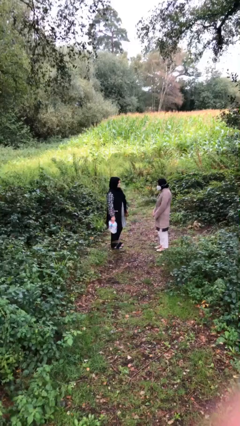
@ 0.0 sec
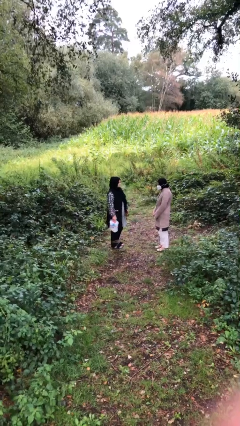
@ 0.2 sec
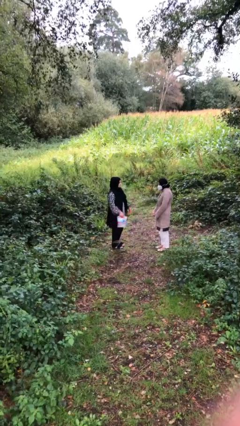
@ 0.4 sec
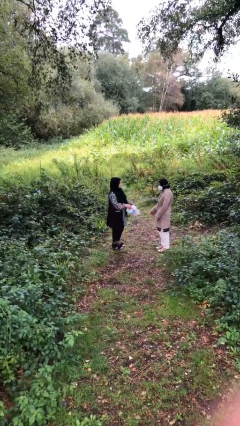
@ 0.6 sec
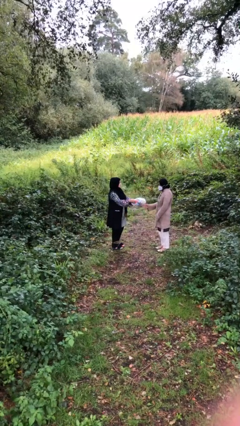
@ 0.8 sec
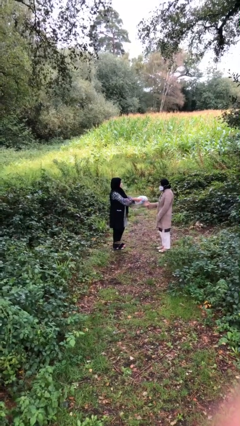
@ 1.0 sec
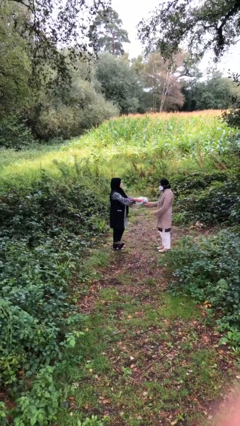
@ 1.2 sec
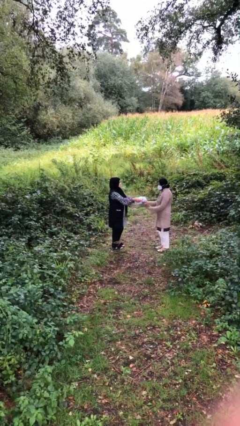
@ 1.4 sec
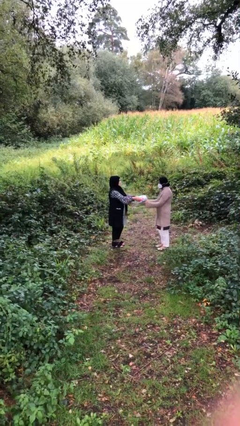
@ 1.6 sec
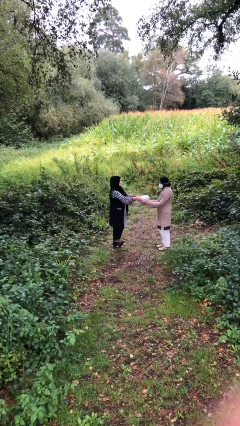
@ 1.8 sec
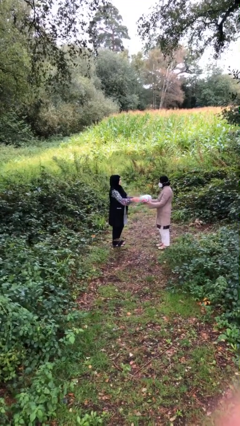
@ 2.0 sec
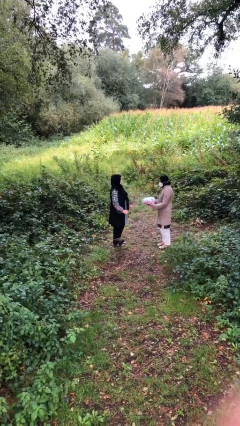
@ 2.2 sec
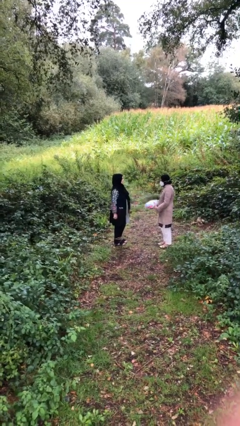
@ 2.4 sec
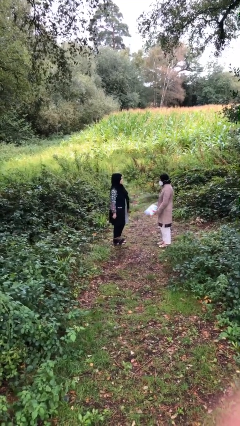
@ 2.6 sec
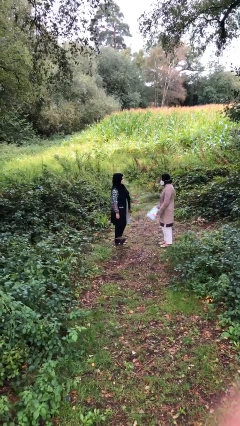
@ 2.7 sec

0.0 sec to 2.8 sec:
person transfers object to person

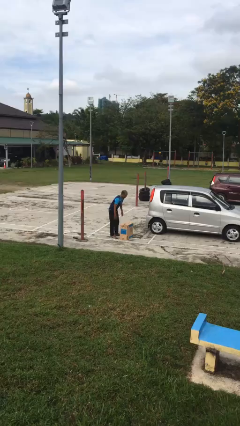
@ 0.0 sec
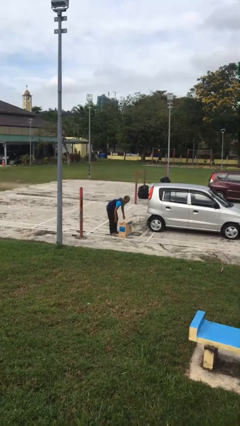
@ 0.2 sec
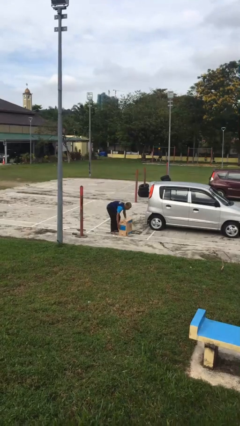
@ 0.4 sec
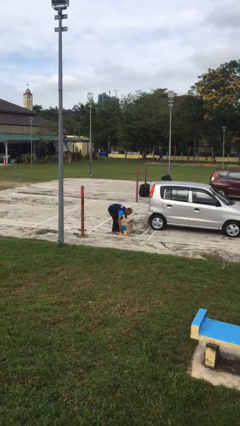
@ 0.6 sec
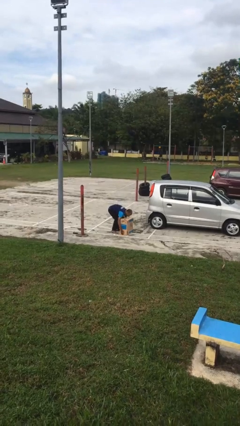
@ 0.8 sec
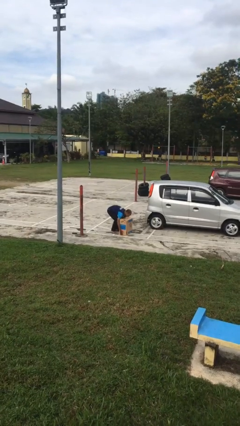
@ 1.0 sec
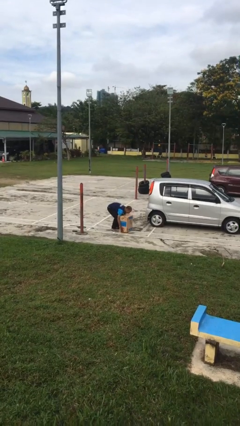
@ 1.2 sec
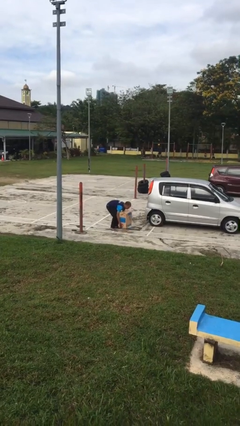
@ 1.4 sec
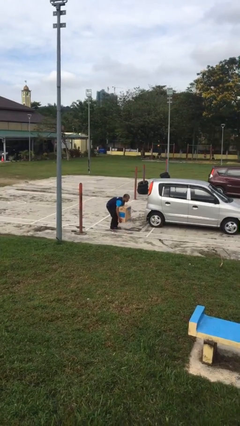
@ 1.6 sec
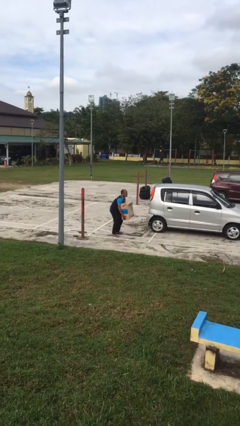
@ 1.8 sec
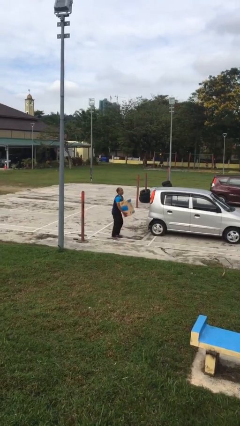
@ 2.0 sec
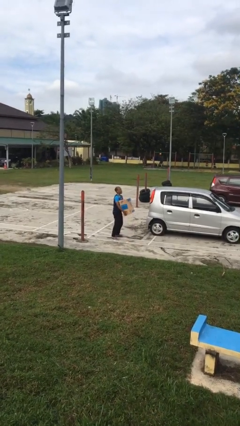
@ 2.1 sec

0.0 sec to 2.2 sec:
person picks up object from floor

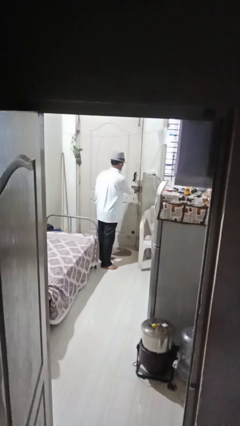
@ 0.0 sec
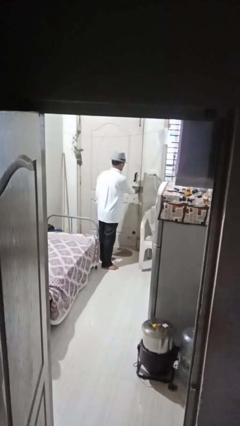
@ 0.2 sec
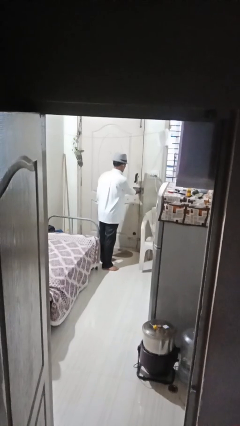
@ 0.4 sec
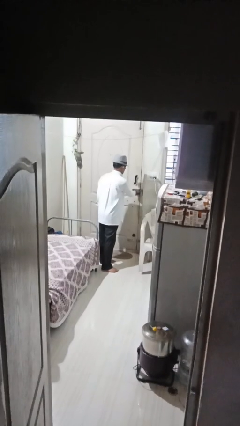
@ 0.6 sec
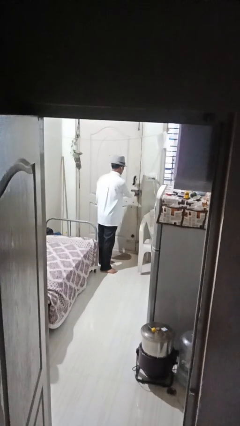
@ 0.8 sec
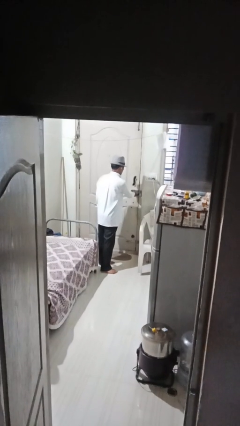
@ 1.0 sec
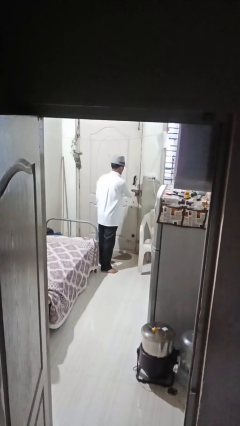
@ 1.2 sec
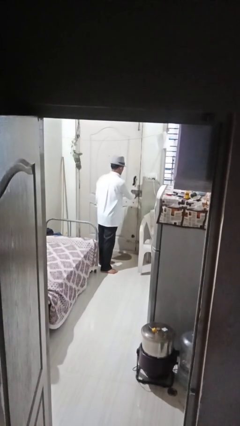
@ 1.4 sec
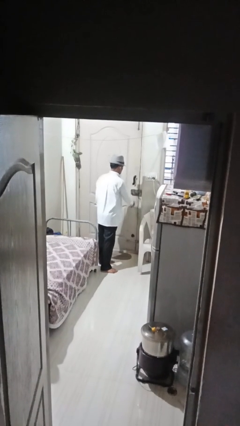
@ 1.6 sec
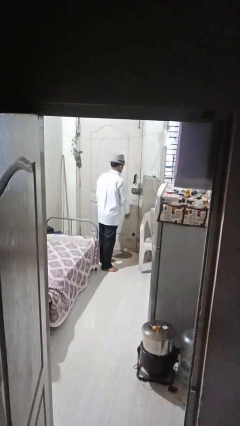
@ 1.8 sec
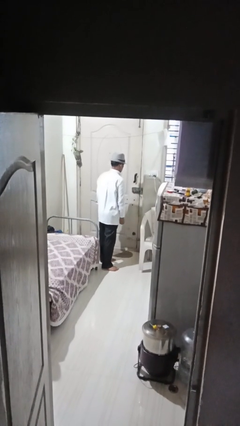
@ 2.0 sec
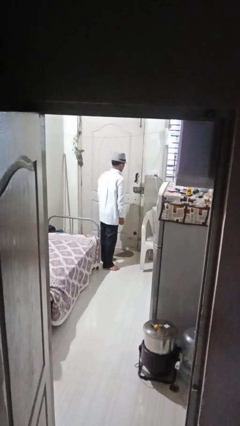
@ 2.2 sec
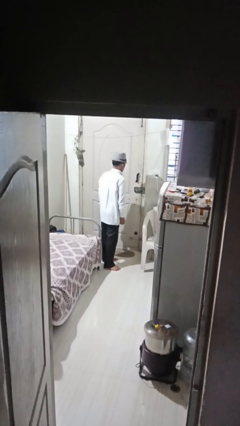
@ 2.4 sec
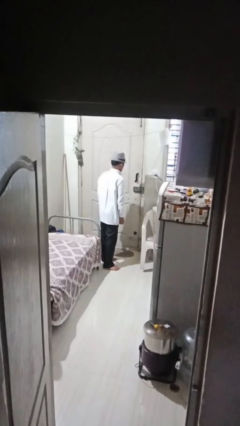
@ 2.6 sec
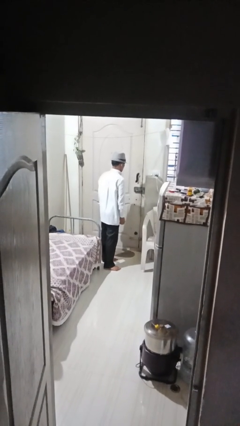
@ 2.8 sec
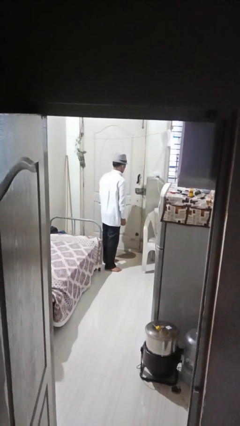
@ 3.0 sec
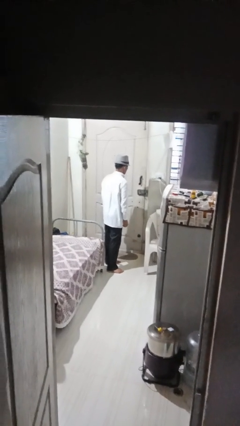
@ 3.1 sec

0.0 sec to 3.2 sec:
person locks door with keys

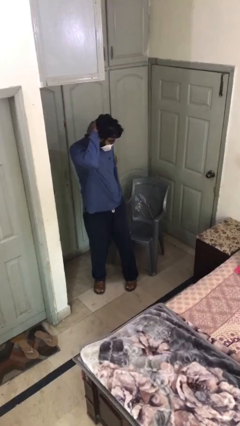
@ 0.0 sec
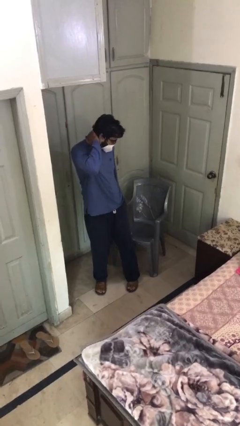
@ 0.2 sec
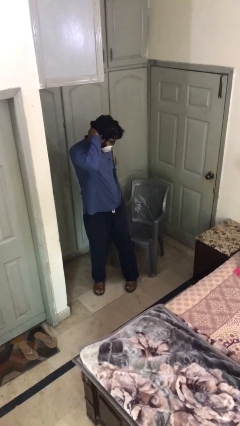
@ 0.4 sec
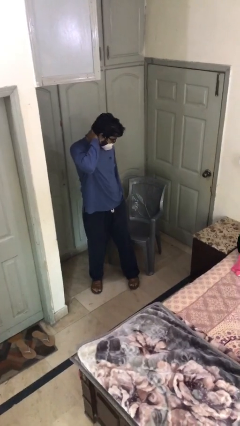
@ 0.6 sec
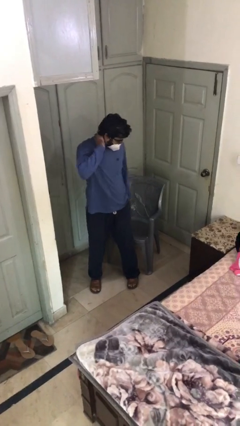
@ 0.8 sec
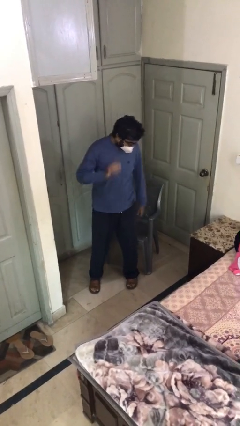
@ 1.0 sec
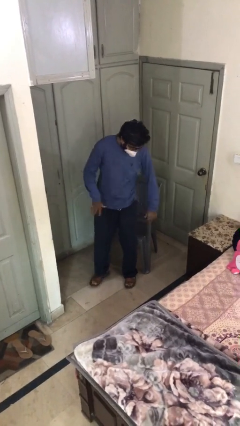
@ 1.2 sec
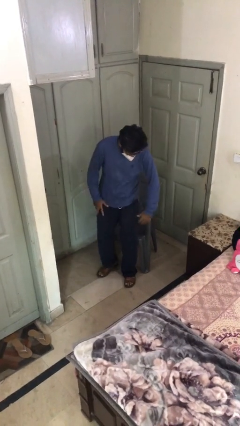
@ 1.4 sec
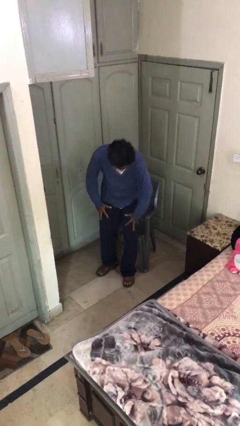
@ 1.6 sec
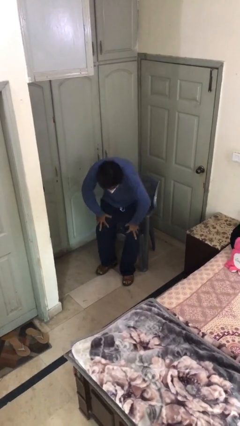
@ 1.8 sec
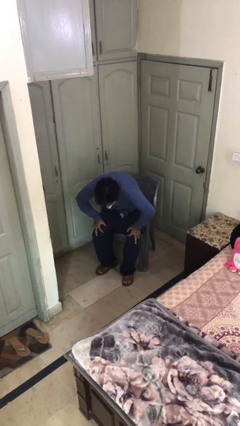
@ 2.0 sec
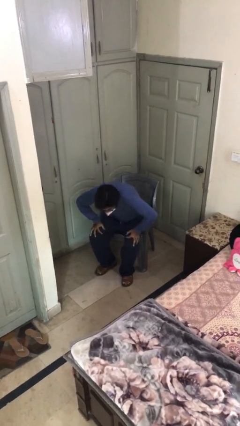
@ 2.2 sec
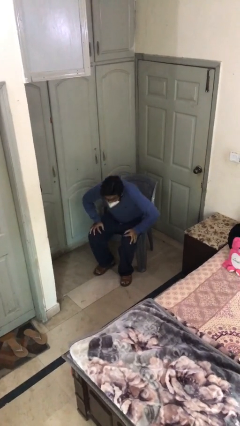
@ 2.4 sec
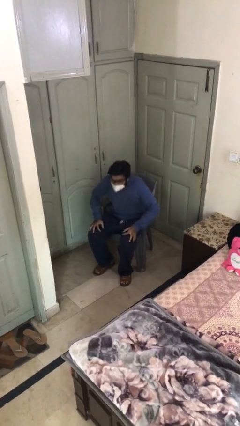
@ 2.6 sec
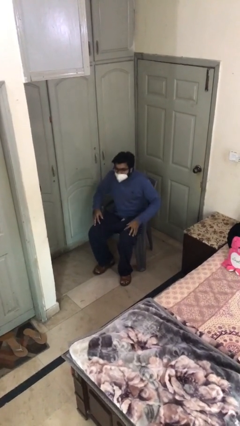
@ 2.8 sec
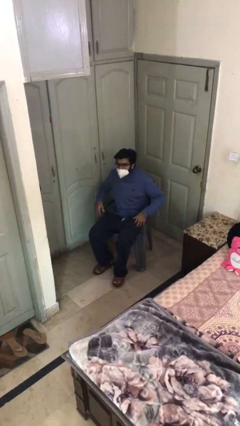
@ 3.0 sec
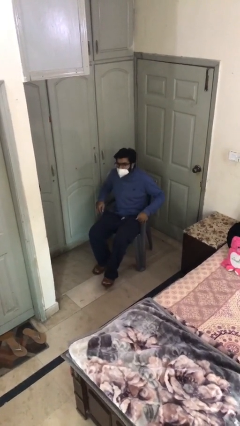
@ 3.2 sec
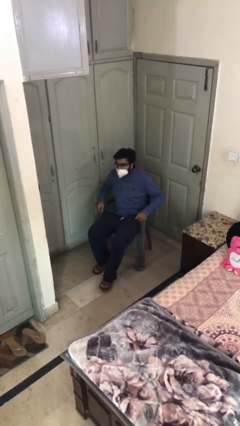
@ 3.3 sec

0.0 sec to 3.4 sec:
person sits down

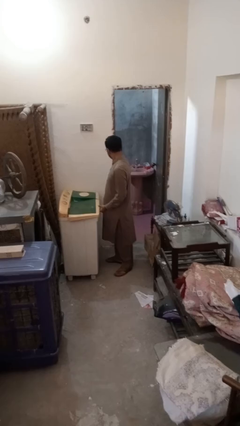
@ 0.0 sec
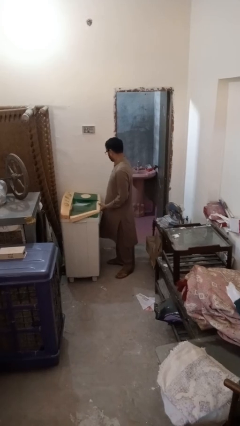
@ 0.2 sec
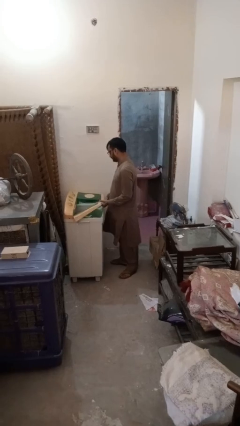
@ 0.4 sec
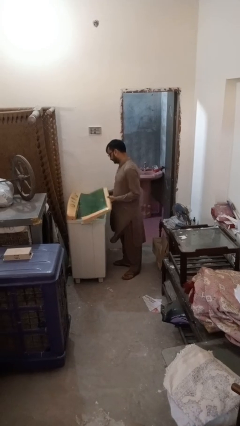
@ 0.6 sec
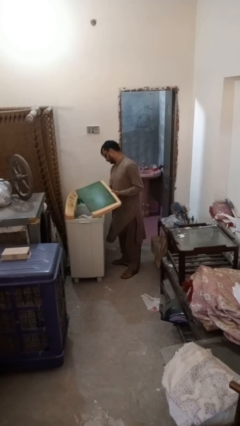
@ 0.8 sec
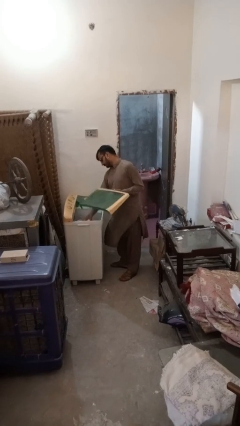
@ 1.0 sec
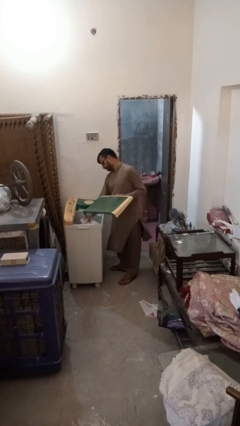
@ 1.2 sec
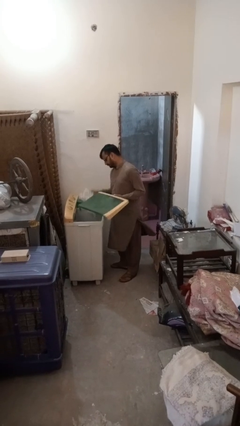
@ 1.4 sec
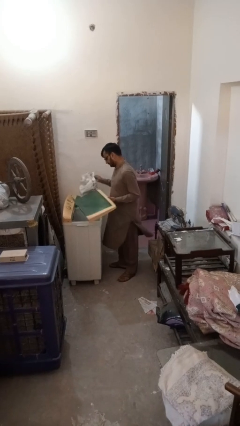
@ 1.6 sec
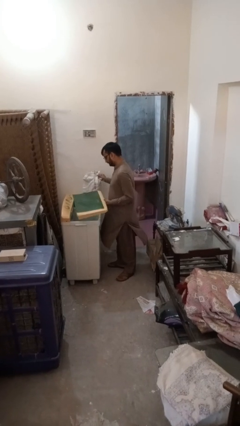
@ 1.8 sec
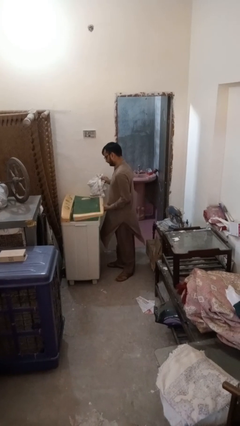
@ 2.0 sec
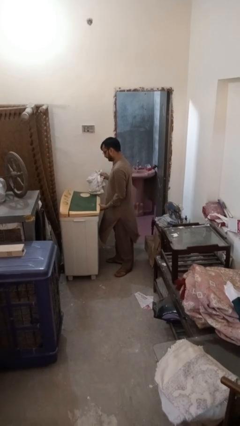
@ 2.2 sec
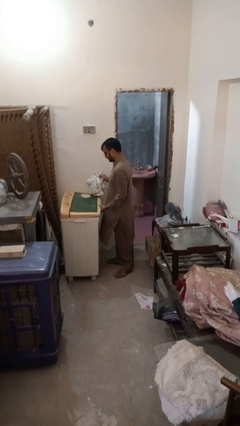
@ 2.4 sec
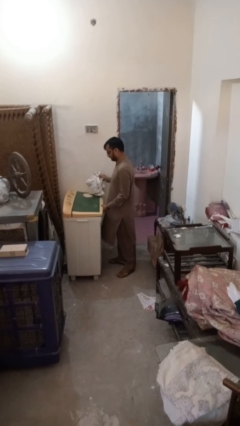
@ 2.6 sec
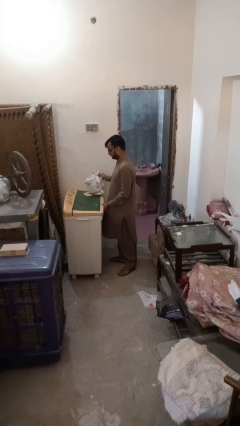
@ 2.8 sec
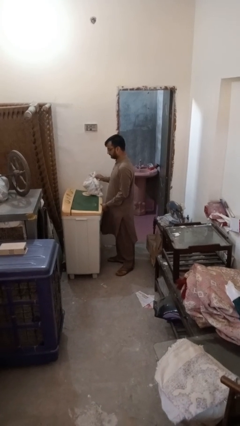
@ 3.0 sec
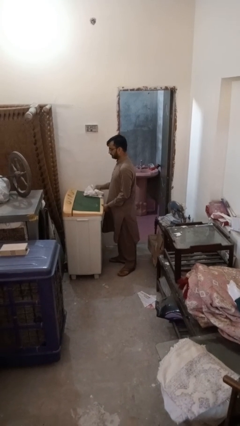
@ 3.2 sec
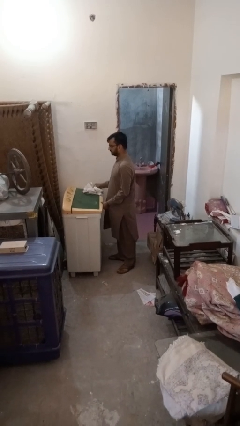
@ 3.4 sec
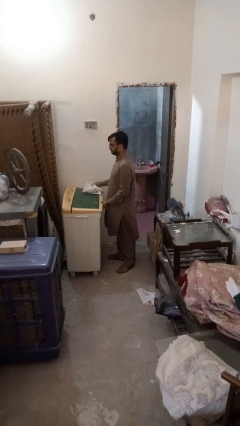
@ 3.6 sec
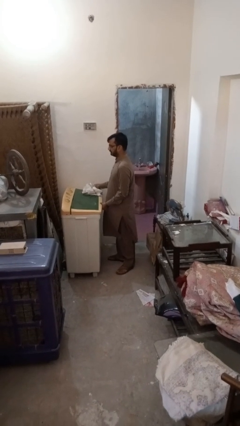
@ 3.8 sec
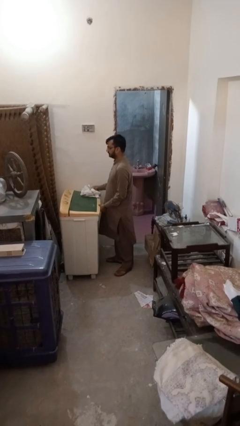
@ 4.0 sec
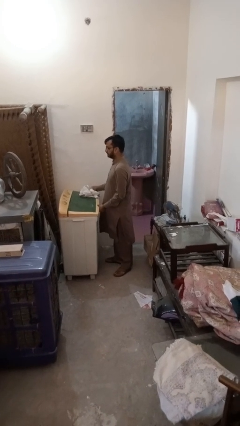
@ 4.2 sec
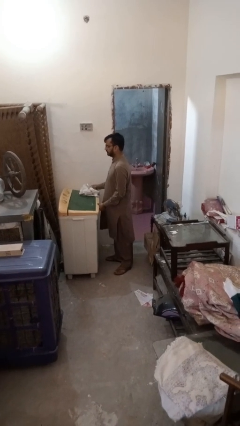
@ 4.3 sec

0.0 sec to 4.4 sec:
person unloads clotheswasher

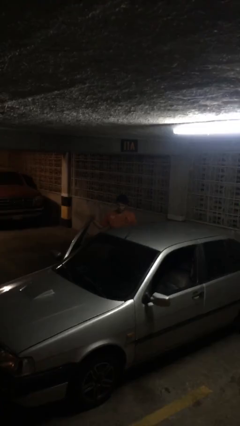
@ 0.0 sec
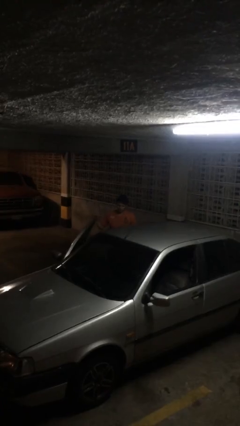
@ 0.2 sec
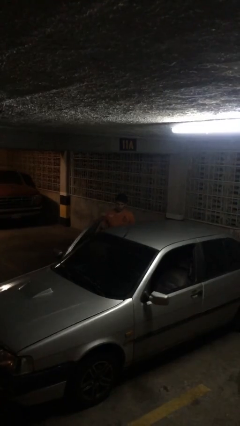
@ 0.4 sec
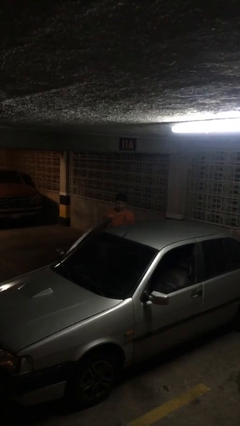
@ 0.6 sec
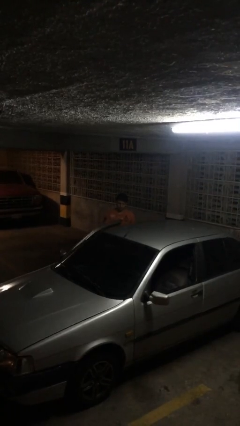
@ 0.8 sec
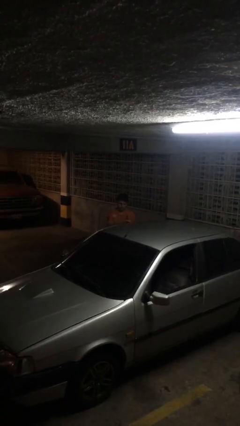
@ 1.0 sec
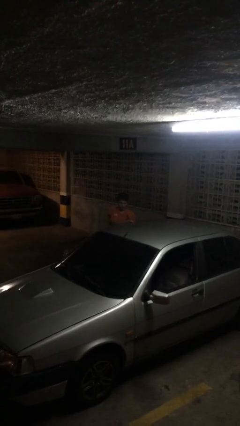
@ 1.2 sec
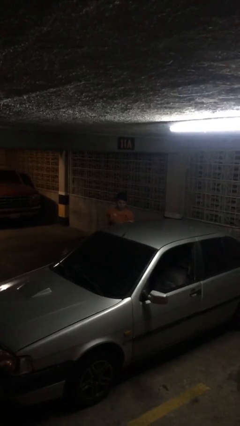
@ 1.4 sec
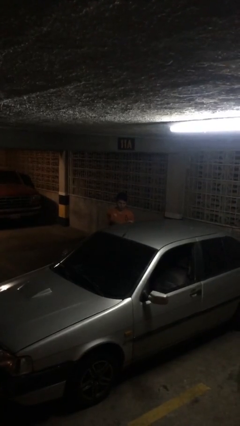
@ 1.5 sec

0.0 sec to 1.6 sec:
person closes car door
